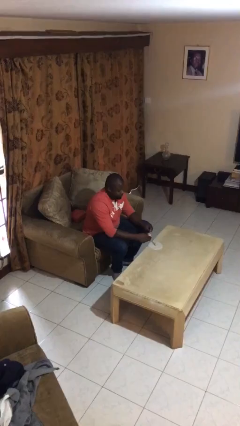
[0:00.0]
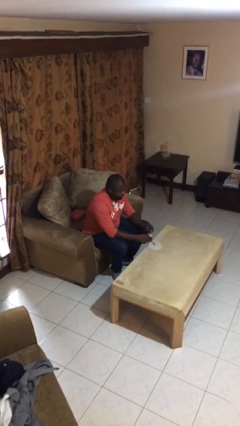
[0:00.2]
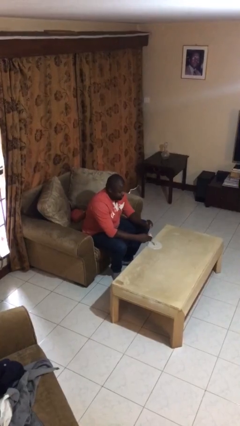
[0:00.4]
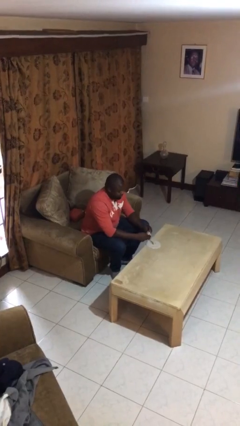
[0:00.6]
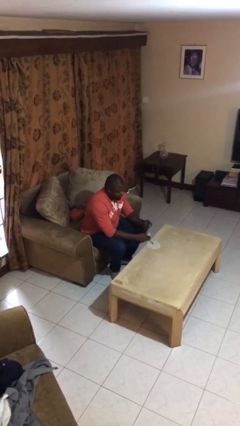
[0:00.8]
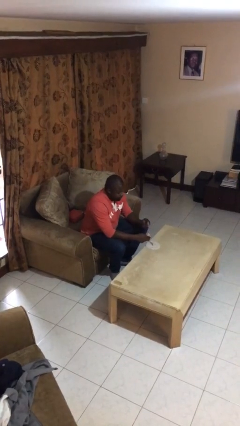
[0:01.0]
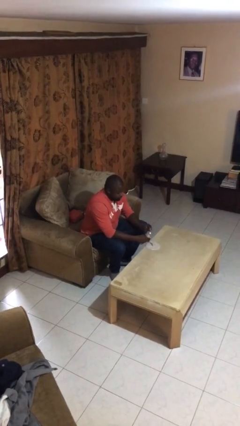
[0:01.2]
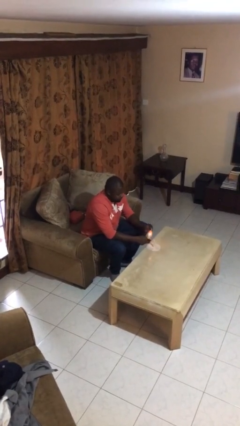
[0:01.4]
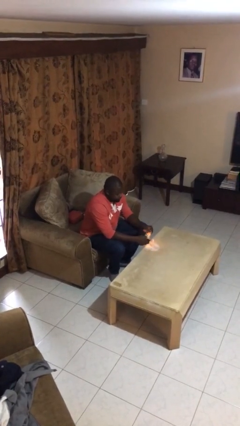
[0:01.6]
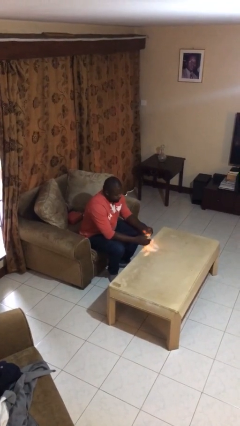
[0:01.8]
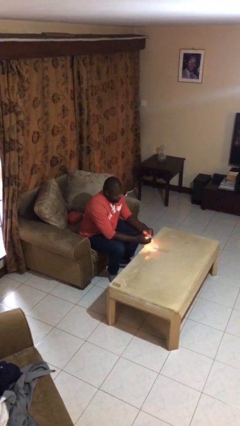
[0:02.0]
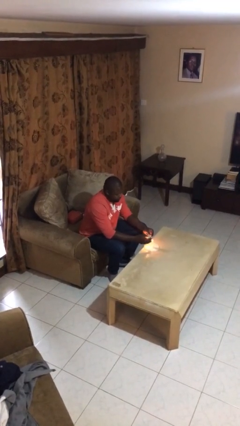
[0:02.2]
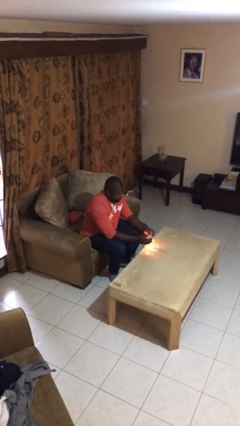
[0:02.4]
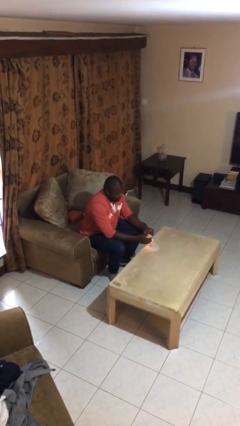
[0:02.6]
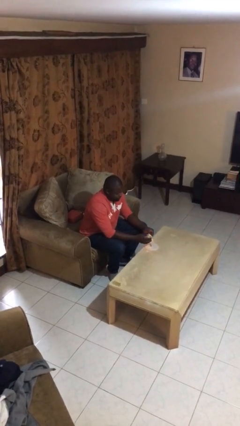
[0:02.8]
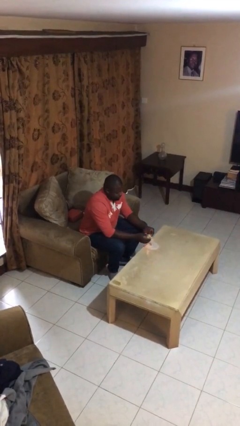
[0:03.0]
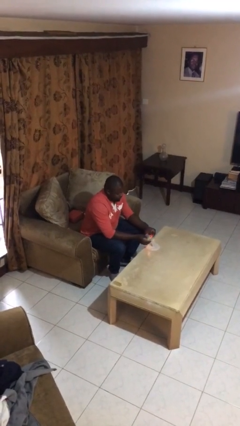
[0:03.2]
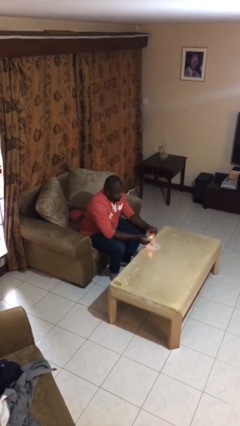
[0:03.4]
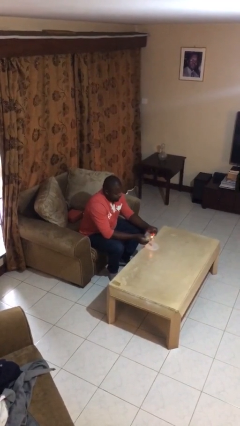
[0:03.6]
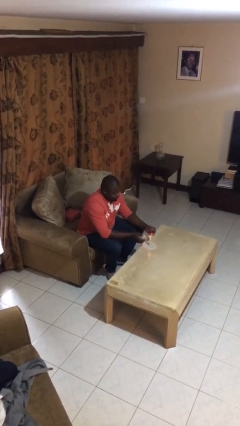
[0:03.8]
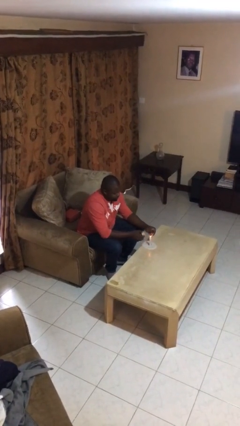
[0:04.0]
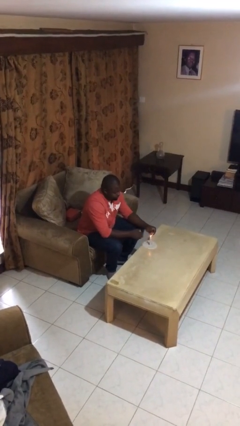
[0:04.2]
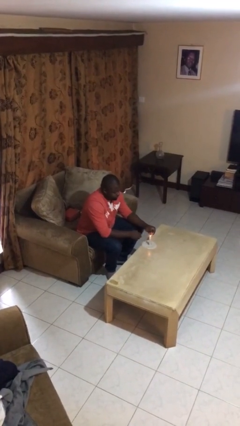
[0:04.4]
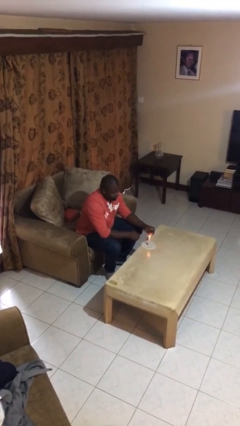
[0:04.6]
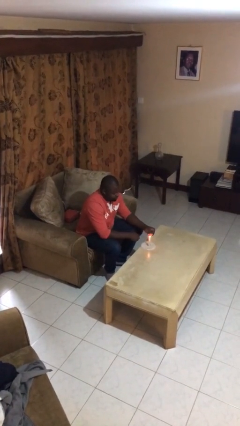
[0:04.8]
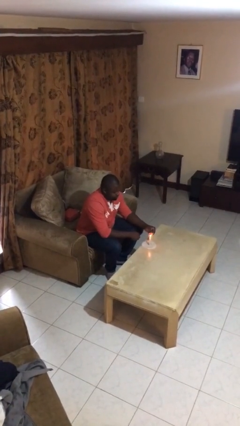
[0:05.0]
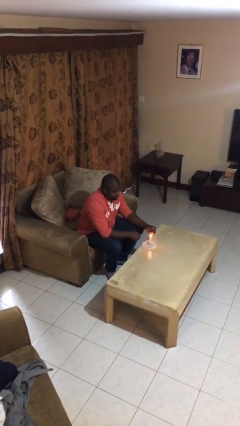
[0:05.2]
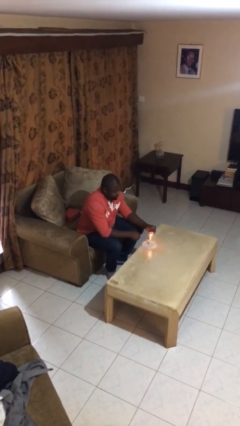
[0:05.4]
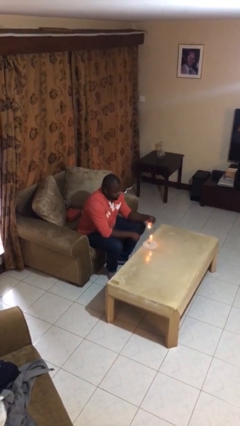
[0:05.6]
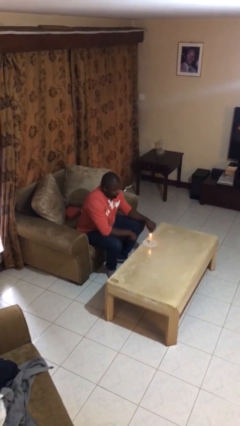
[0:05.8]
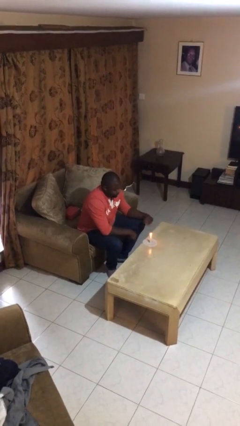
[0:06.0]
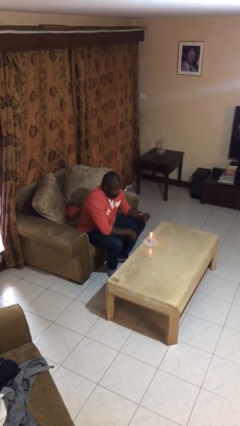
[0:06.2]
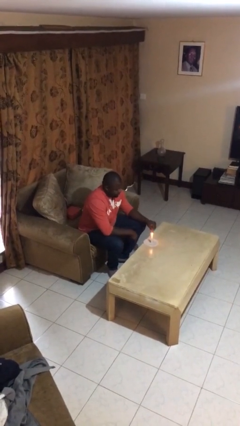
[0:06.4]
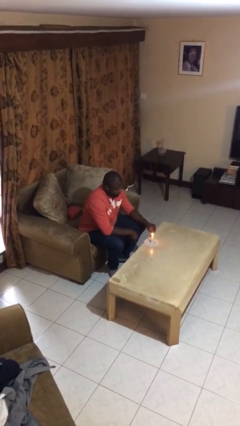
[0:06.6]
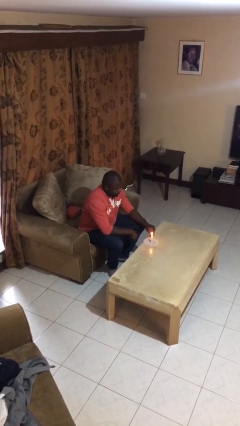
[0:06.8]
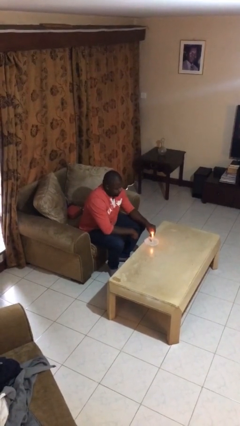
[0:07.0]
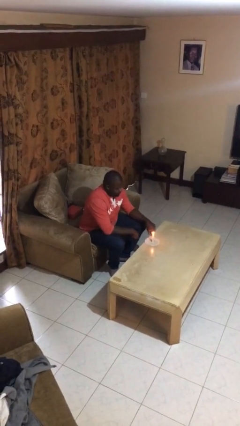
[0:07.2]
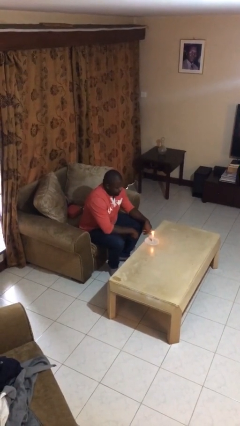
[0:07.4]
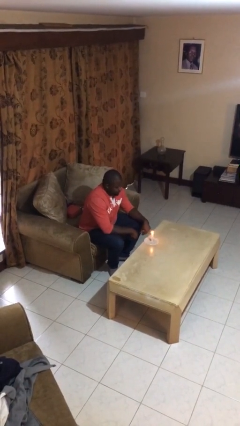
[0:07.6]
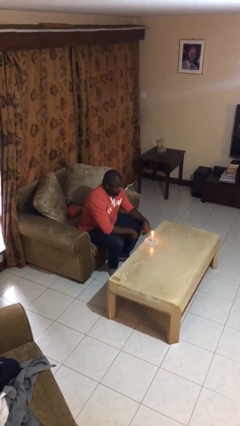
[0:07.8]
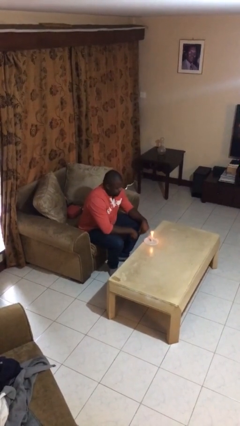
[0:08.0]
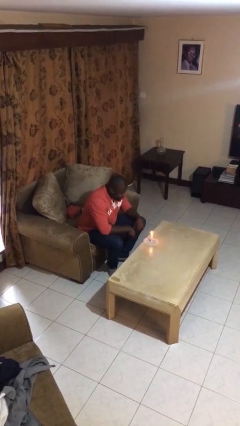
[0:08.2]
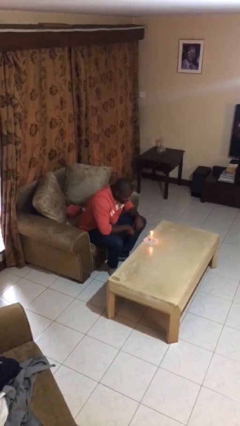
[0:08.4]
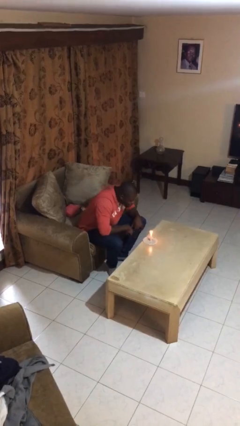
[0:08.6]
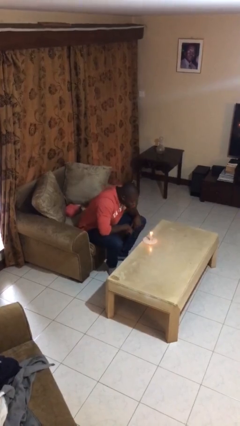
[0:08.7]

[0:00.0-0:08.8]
person lights candle

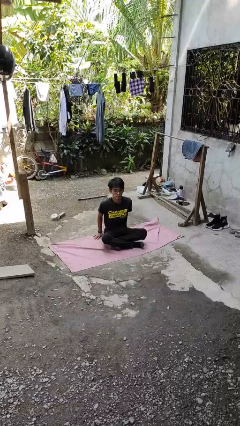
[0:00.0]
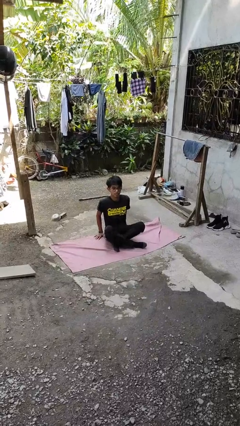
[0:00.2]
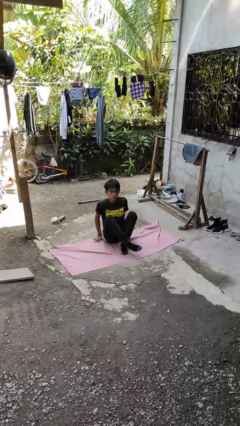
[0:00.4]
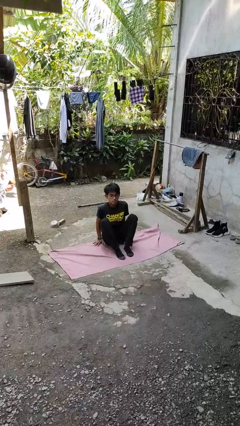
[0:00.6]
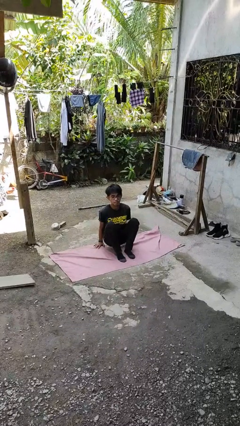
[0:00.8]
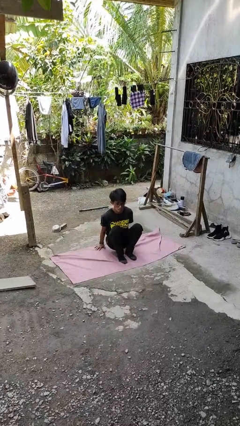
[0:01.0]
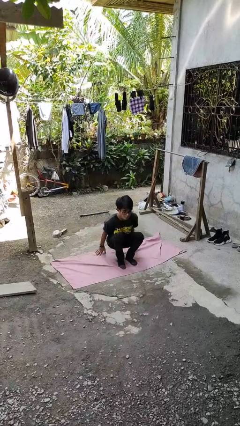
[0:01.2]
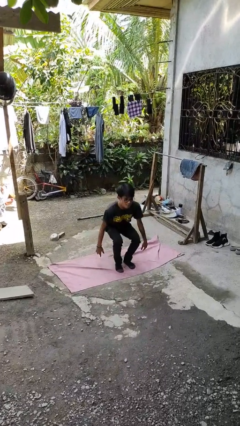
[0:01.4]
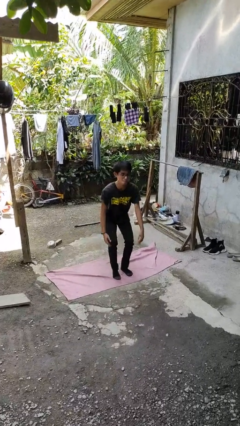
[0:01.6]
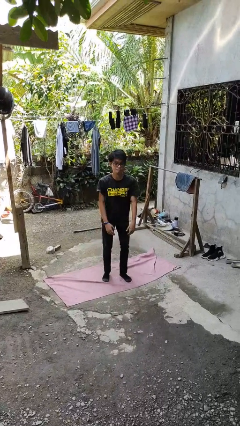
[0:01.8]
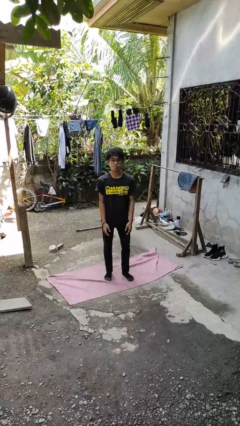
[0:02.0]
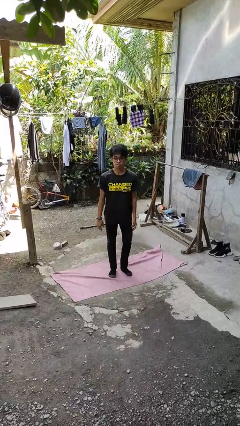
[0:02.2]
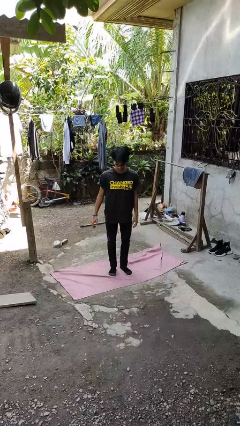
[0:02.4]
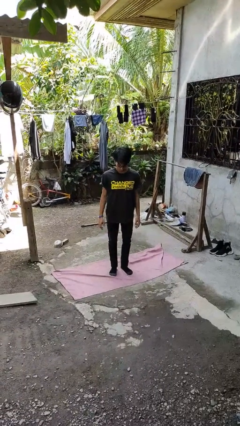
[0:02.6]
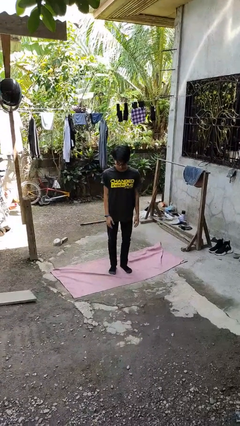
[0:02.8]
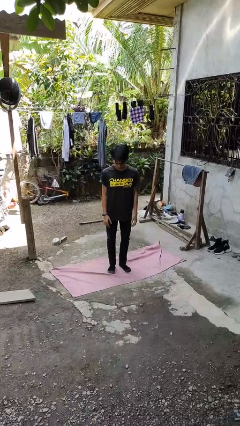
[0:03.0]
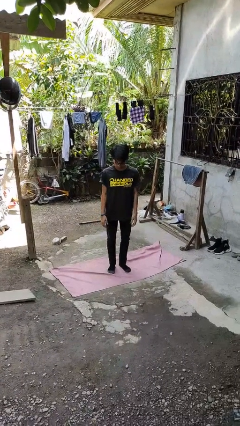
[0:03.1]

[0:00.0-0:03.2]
person stands up from floor

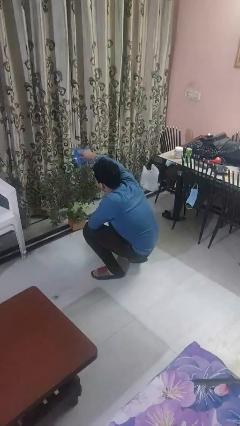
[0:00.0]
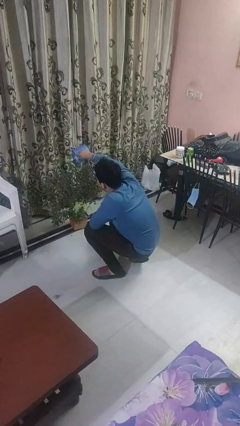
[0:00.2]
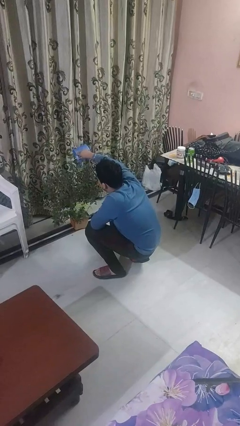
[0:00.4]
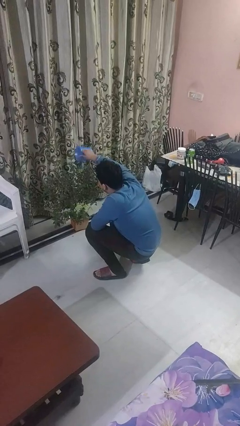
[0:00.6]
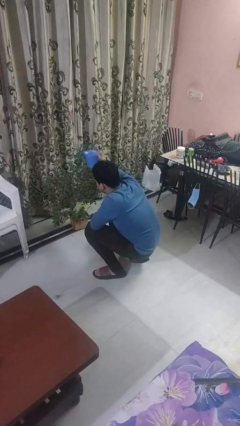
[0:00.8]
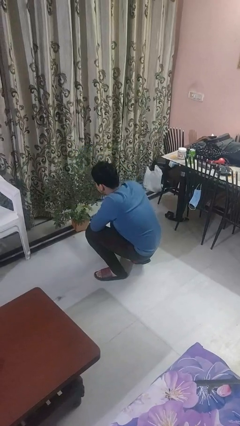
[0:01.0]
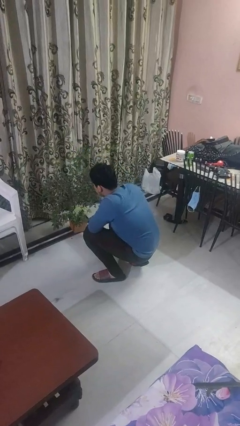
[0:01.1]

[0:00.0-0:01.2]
person waters houseplant

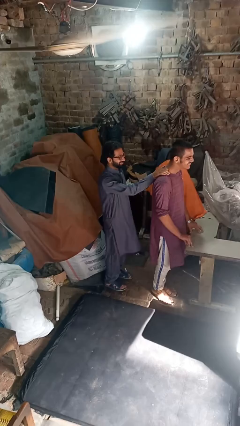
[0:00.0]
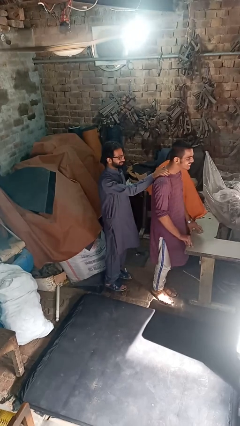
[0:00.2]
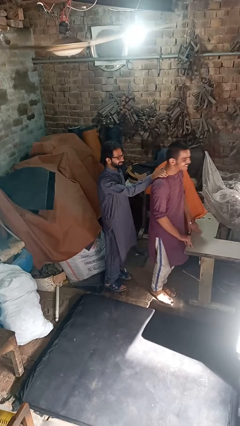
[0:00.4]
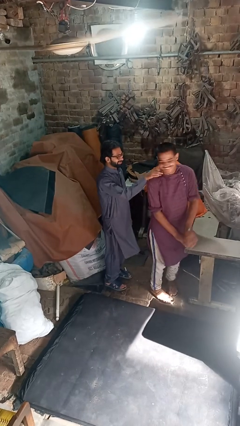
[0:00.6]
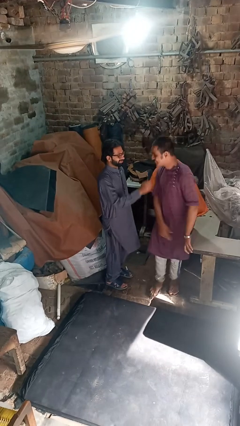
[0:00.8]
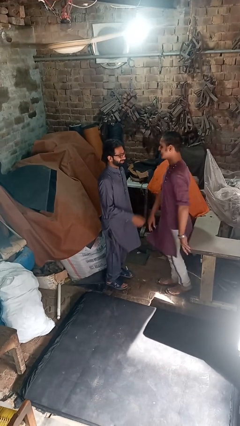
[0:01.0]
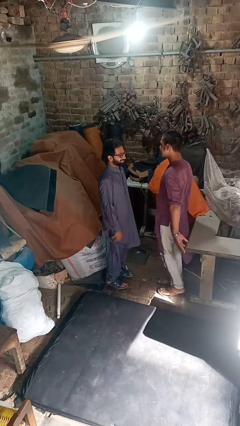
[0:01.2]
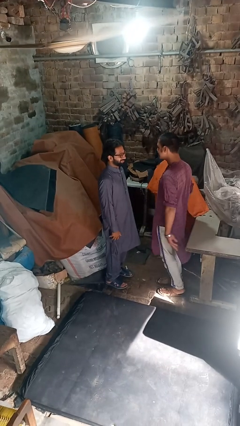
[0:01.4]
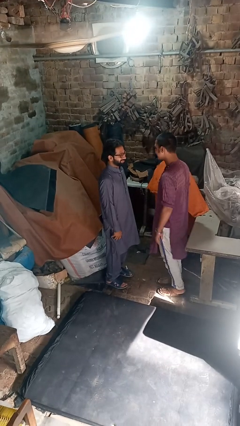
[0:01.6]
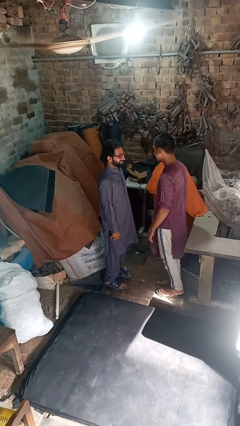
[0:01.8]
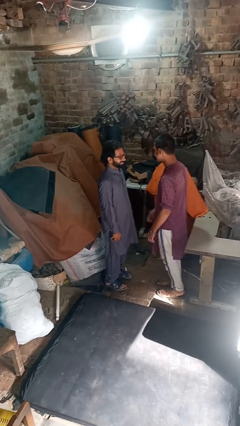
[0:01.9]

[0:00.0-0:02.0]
person spins person around

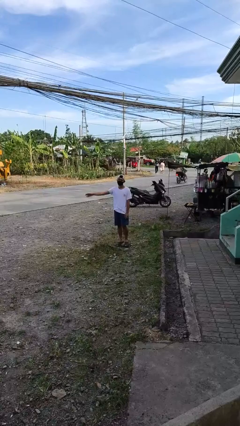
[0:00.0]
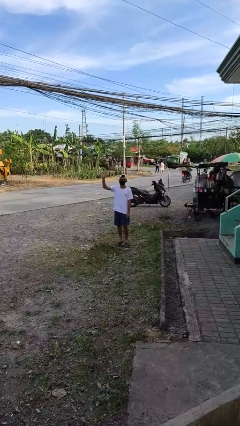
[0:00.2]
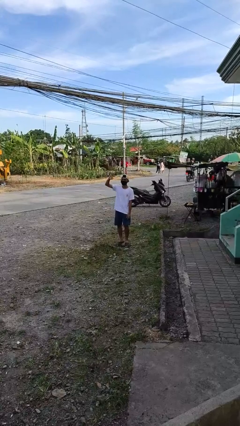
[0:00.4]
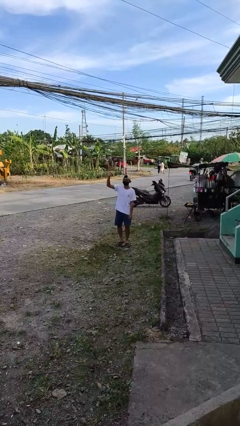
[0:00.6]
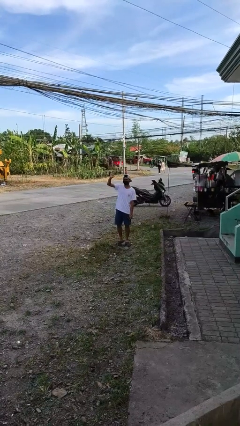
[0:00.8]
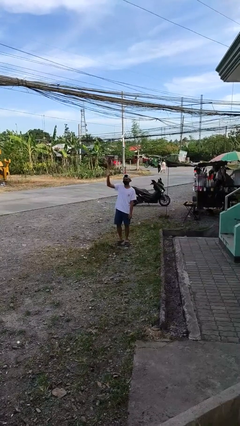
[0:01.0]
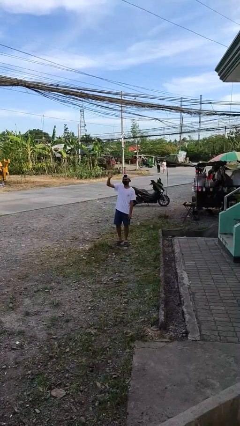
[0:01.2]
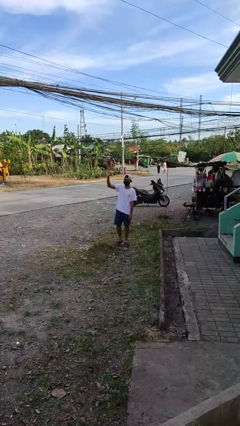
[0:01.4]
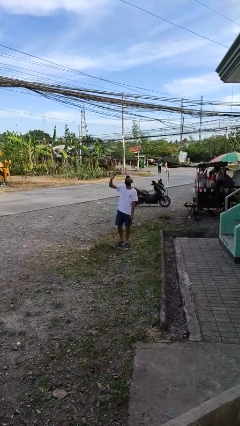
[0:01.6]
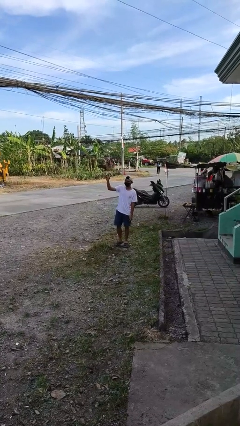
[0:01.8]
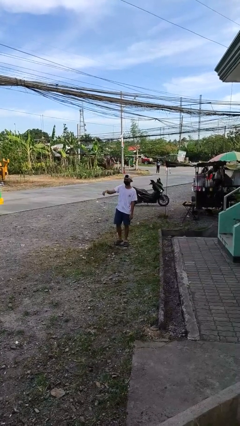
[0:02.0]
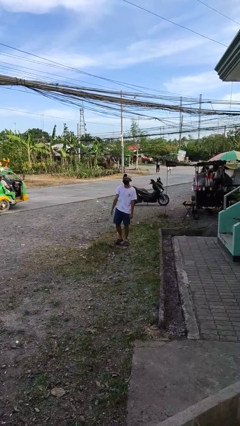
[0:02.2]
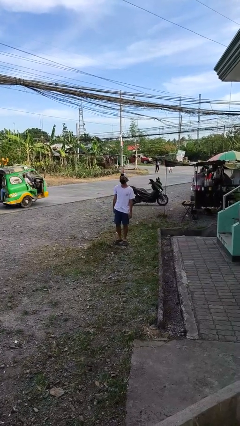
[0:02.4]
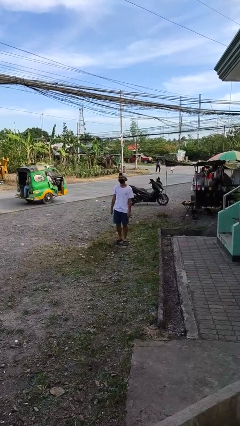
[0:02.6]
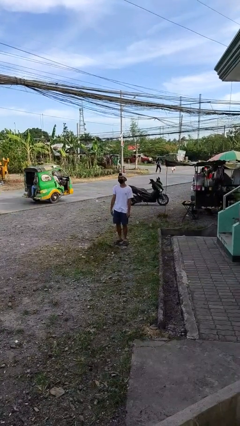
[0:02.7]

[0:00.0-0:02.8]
person waves at person
